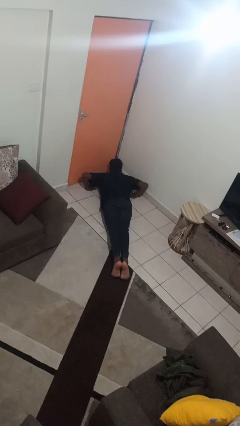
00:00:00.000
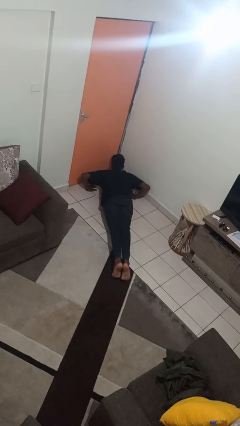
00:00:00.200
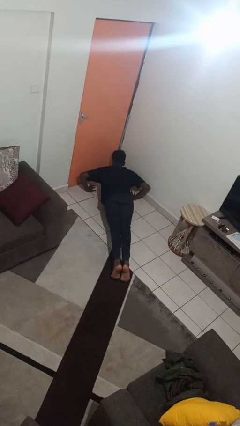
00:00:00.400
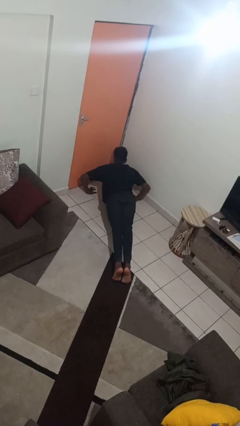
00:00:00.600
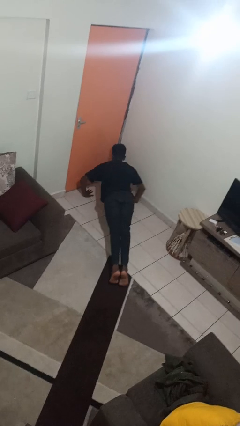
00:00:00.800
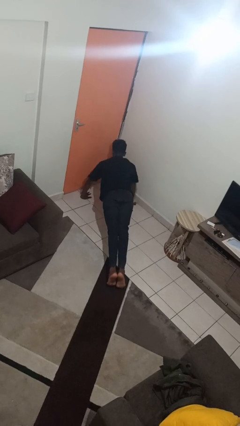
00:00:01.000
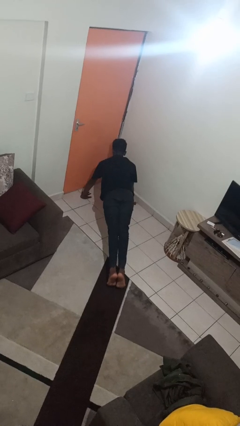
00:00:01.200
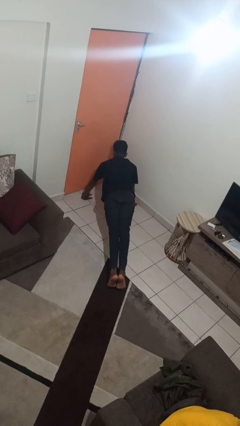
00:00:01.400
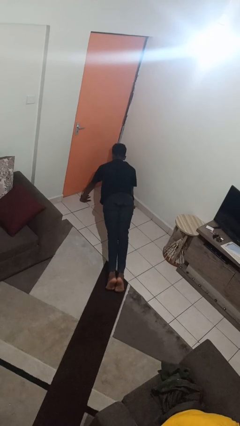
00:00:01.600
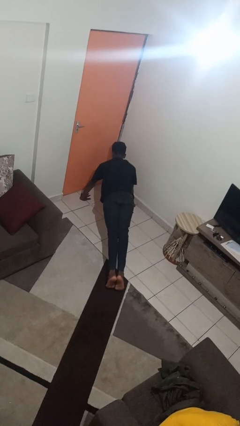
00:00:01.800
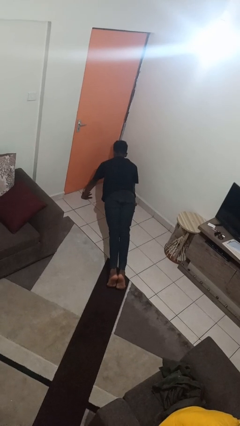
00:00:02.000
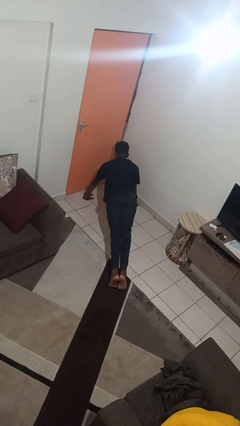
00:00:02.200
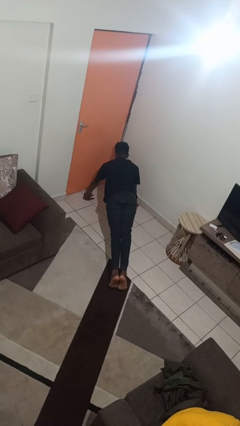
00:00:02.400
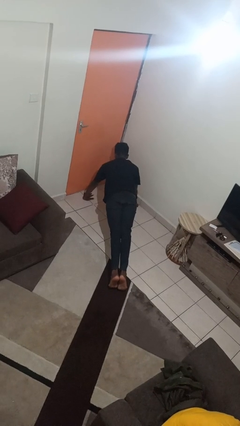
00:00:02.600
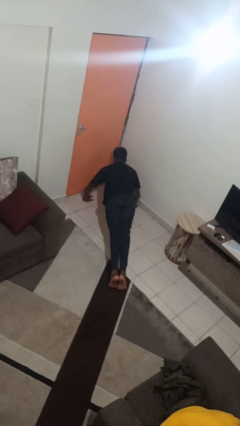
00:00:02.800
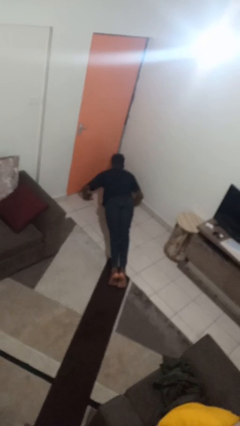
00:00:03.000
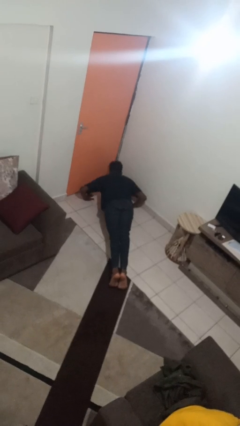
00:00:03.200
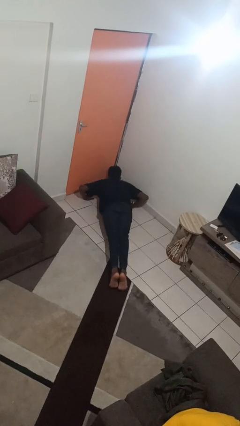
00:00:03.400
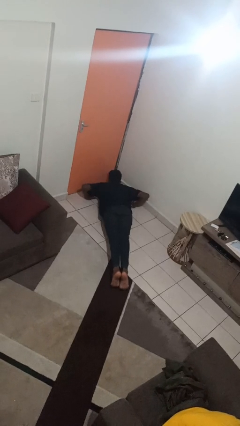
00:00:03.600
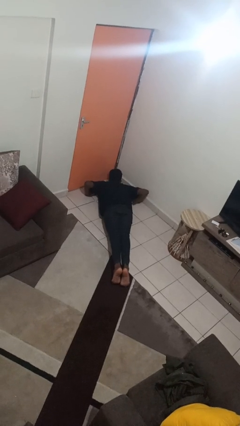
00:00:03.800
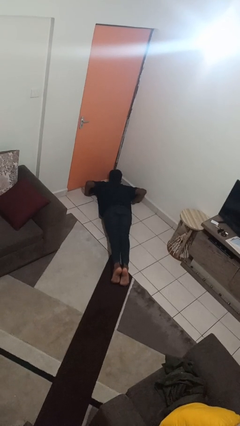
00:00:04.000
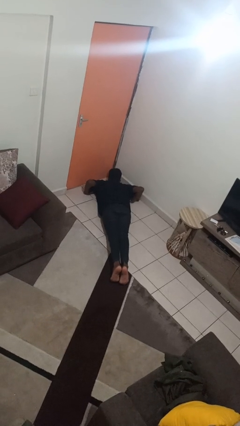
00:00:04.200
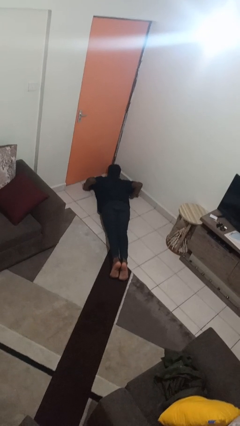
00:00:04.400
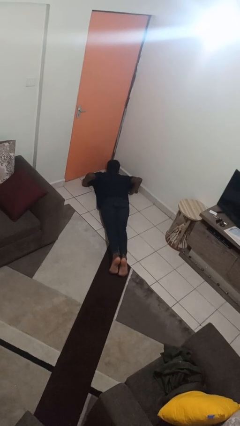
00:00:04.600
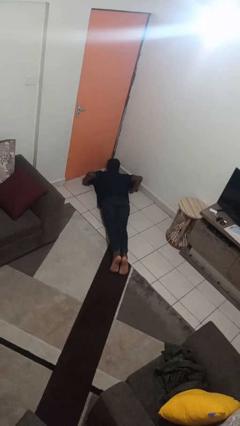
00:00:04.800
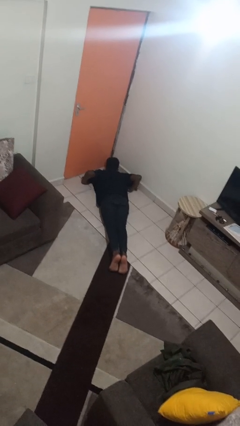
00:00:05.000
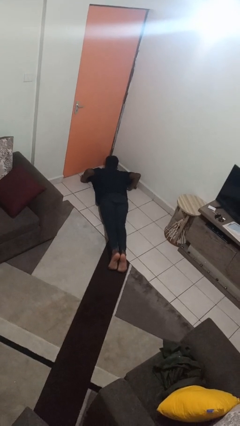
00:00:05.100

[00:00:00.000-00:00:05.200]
person exercises with pushup

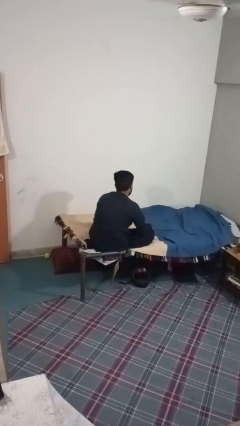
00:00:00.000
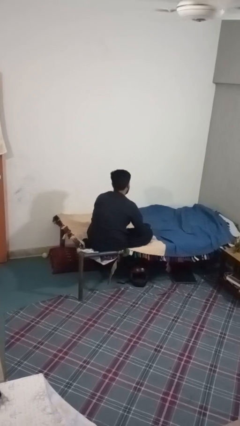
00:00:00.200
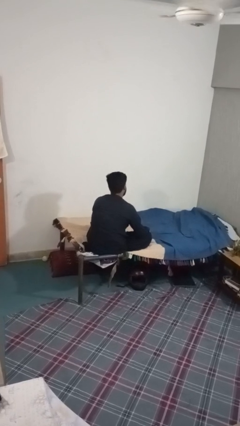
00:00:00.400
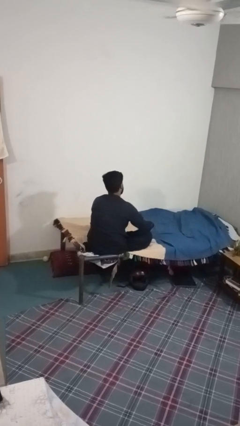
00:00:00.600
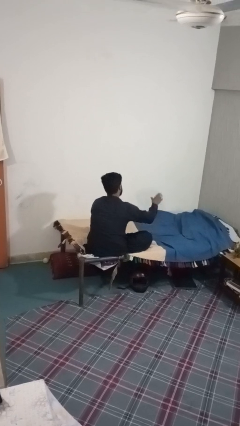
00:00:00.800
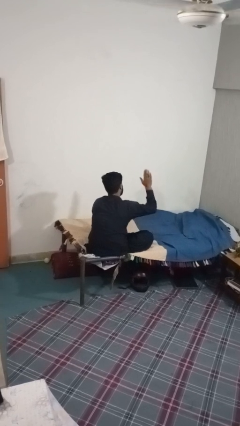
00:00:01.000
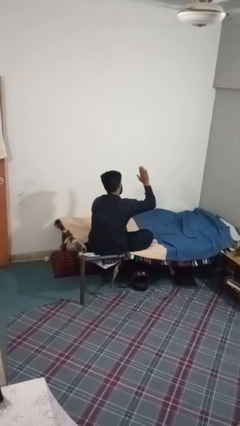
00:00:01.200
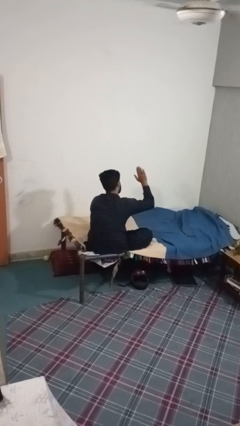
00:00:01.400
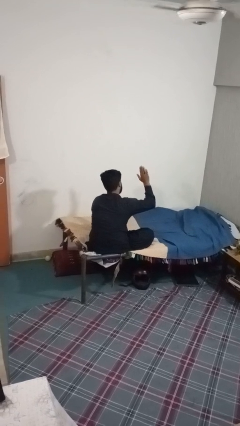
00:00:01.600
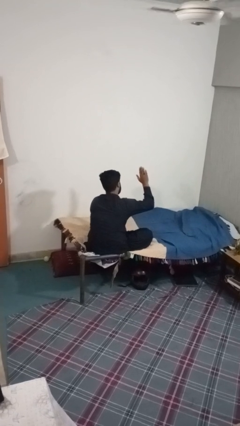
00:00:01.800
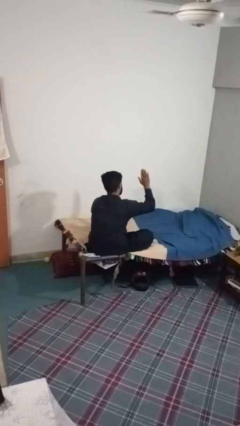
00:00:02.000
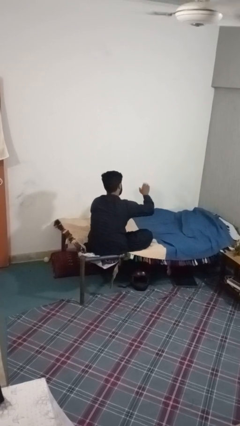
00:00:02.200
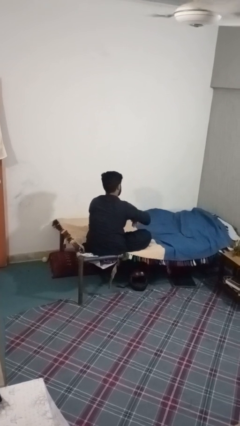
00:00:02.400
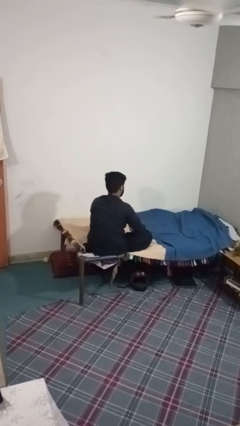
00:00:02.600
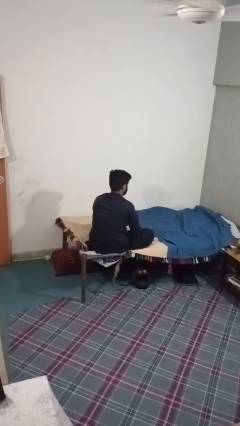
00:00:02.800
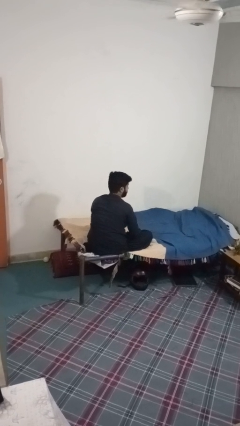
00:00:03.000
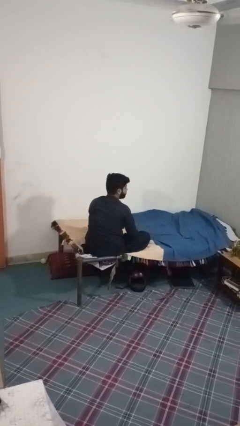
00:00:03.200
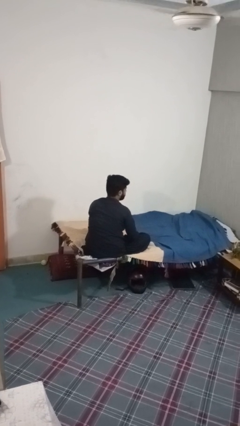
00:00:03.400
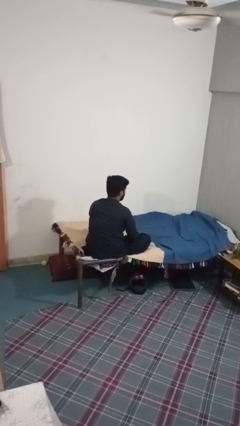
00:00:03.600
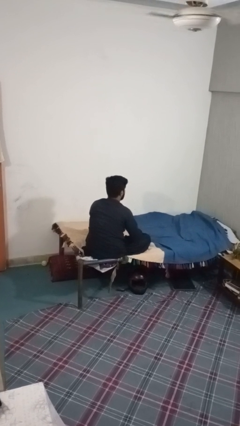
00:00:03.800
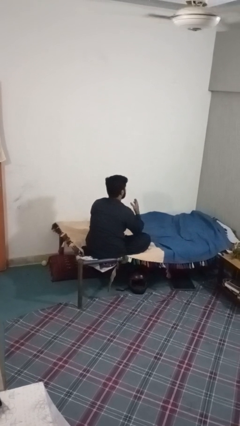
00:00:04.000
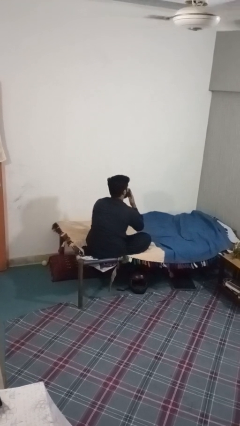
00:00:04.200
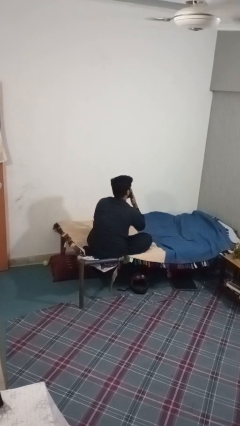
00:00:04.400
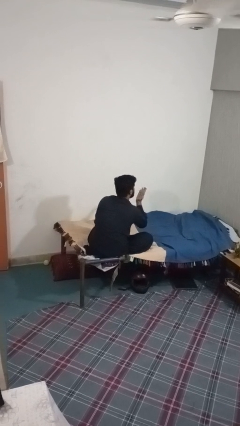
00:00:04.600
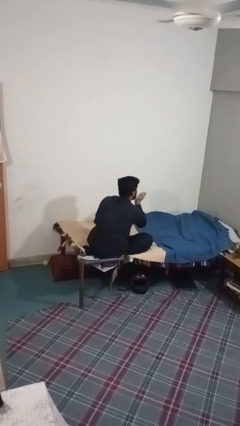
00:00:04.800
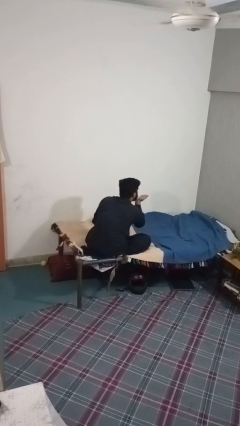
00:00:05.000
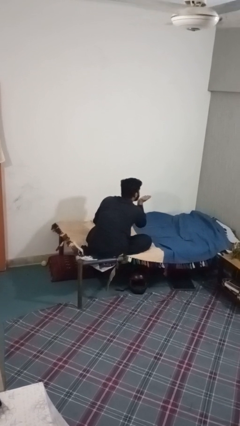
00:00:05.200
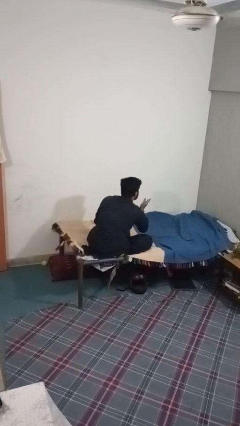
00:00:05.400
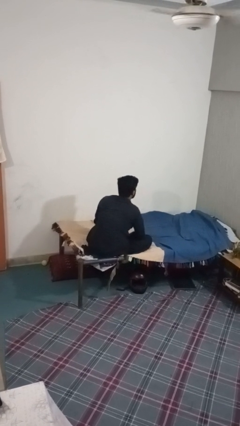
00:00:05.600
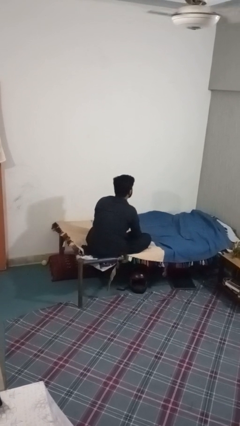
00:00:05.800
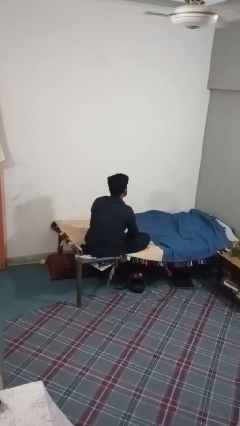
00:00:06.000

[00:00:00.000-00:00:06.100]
person gestures blow kiss

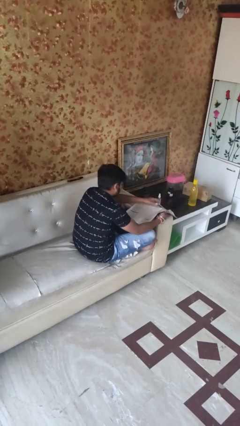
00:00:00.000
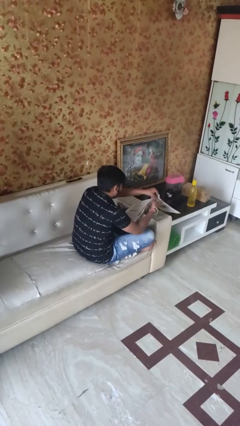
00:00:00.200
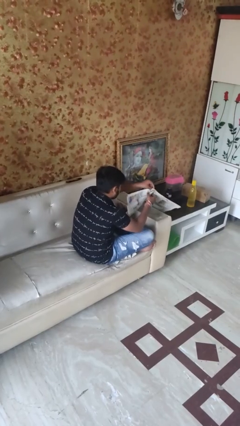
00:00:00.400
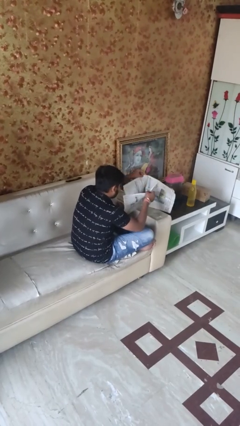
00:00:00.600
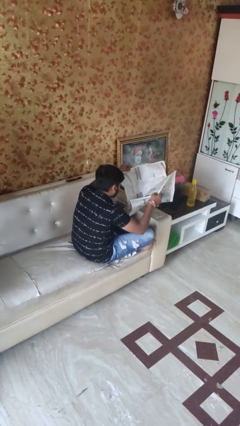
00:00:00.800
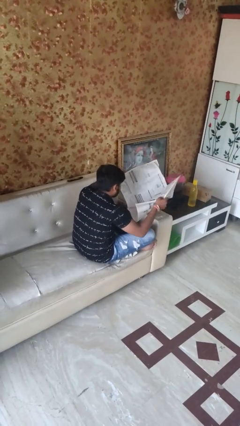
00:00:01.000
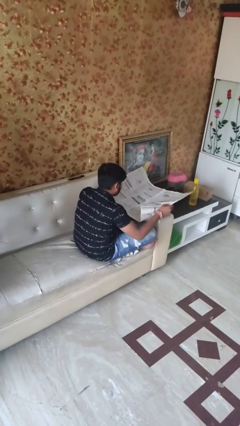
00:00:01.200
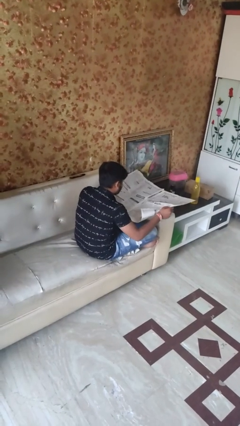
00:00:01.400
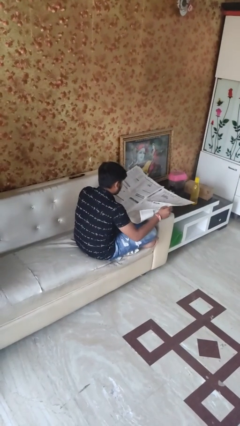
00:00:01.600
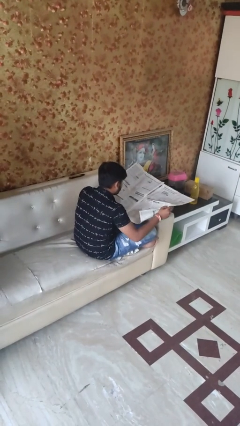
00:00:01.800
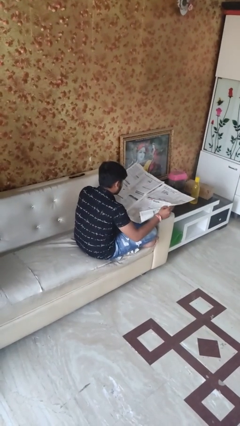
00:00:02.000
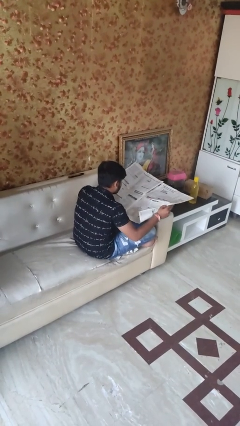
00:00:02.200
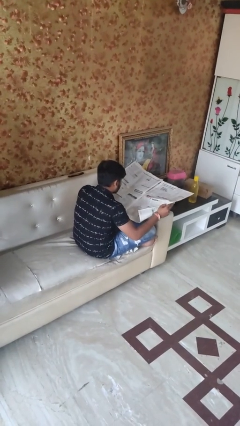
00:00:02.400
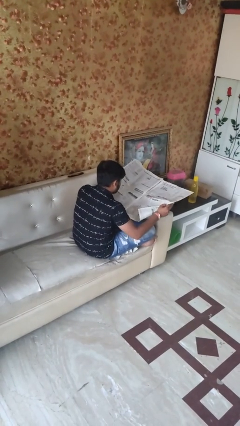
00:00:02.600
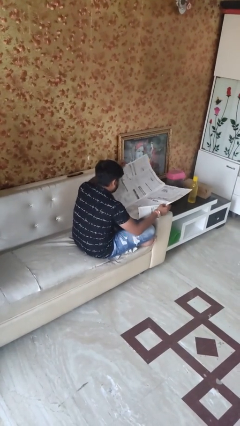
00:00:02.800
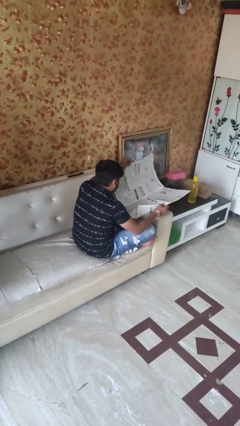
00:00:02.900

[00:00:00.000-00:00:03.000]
person reads newspaper

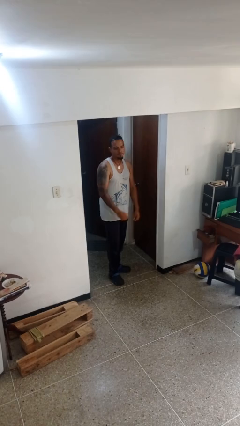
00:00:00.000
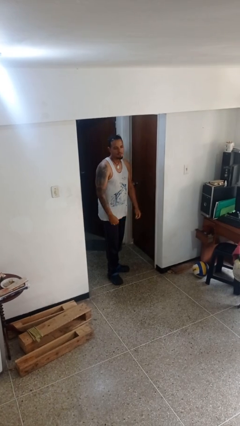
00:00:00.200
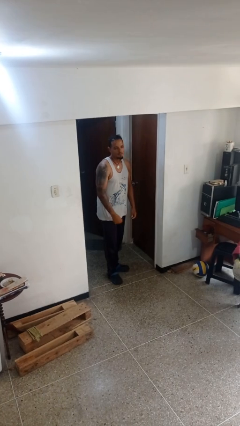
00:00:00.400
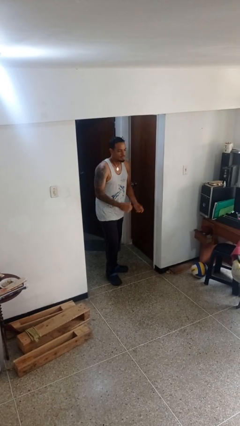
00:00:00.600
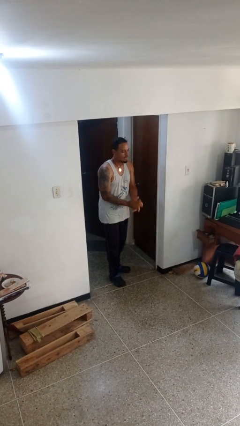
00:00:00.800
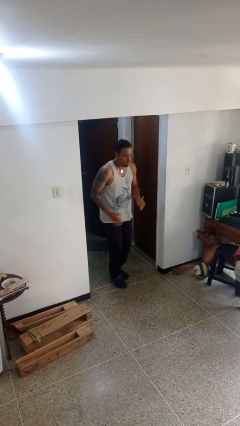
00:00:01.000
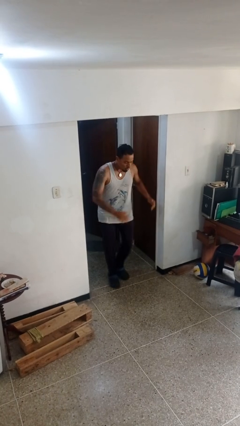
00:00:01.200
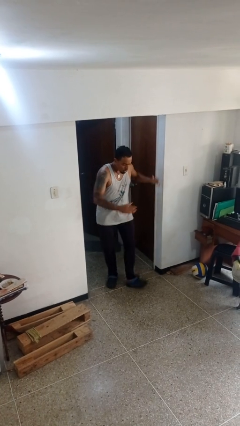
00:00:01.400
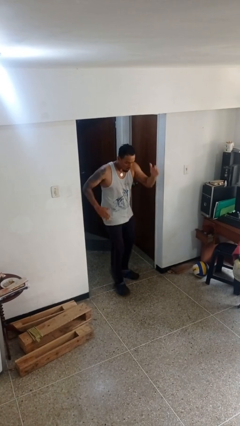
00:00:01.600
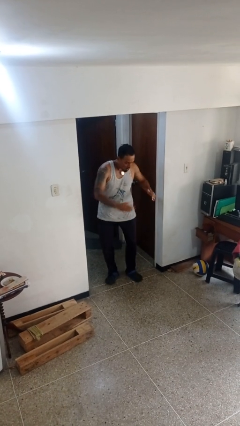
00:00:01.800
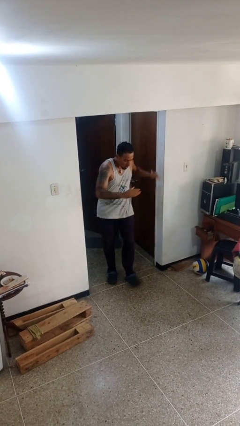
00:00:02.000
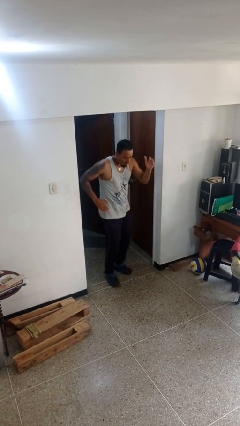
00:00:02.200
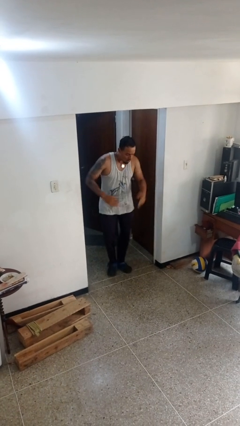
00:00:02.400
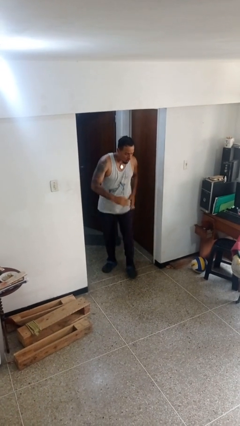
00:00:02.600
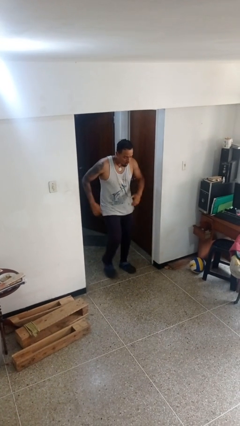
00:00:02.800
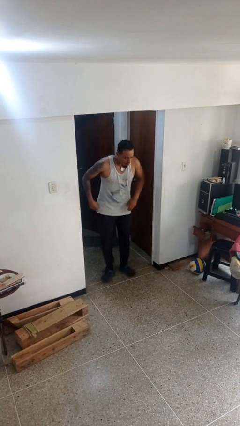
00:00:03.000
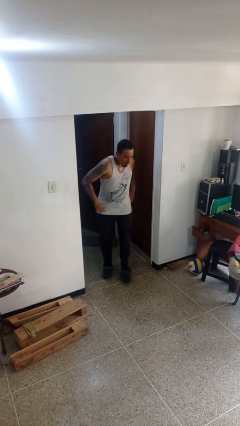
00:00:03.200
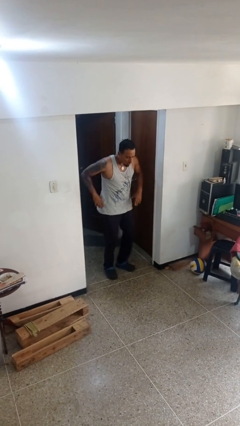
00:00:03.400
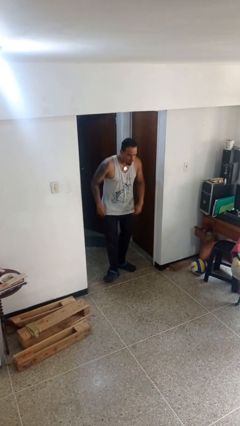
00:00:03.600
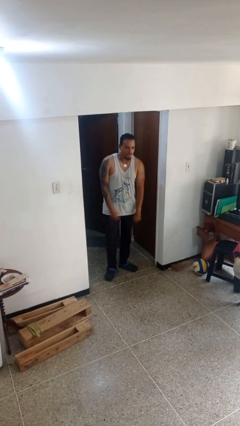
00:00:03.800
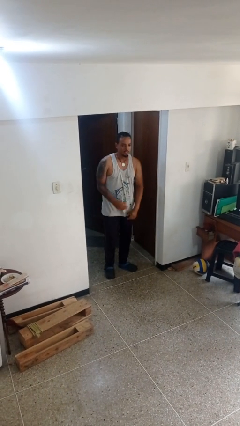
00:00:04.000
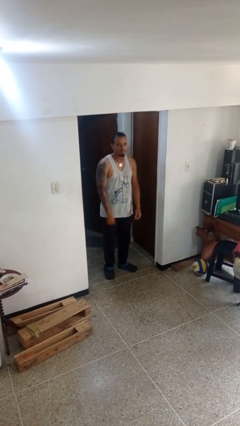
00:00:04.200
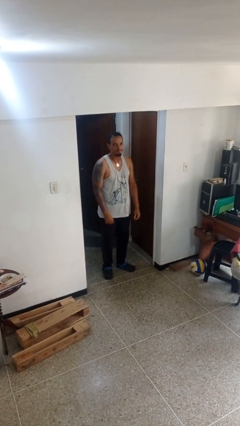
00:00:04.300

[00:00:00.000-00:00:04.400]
person dances in place
